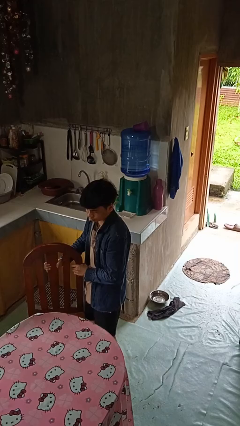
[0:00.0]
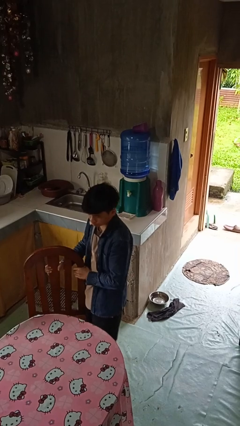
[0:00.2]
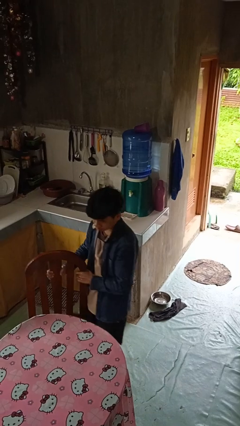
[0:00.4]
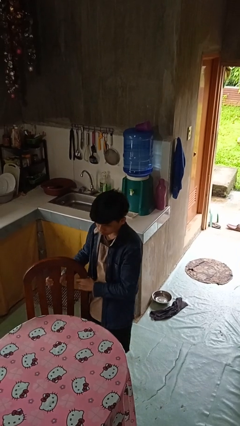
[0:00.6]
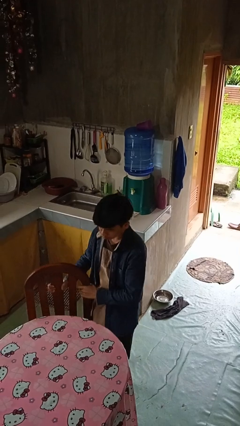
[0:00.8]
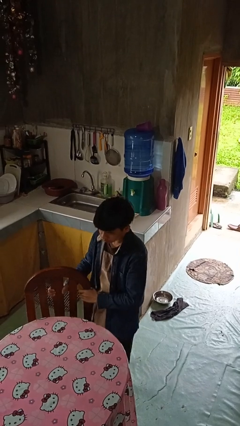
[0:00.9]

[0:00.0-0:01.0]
person pushes in chair

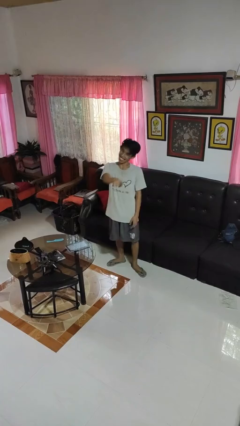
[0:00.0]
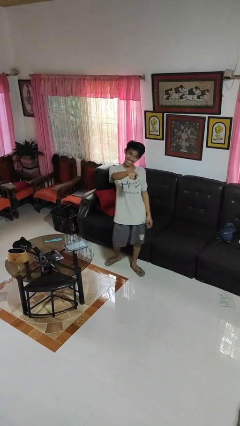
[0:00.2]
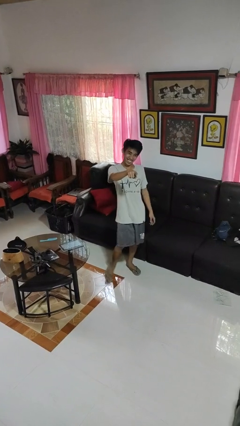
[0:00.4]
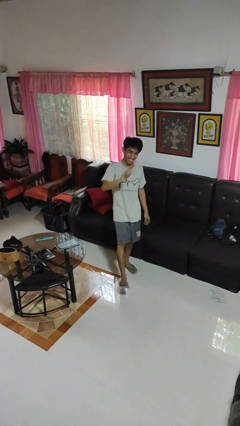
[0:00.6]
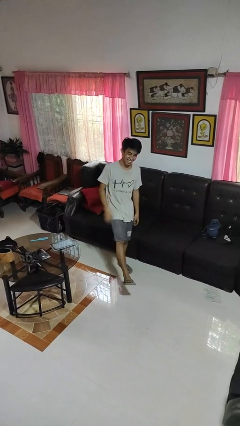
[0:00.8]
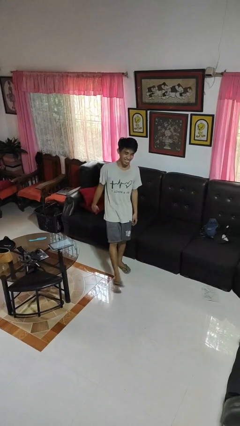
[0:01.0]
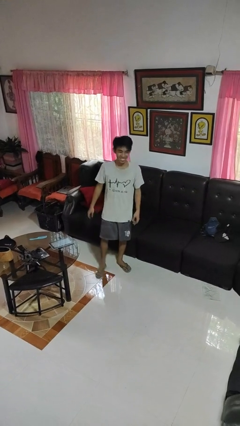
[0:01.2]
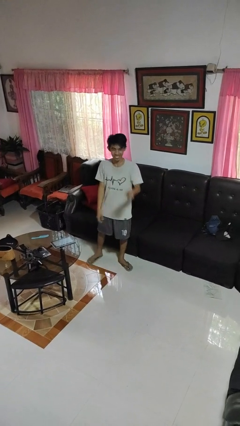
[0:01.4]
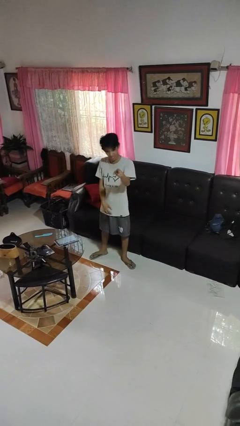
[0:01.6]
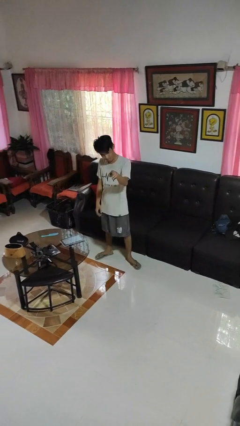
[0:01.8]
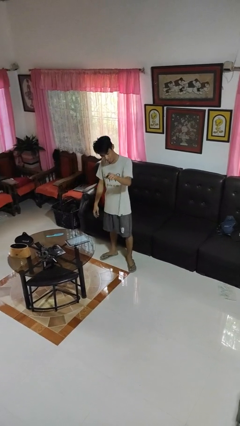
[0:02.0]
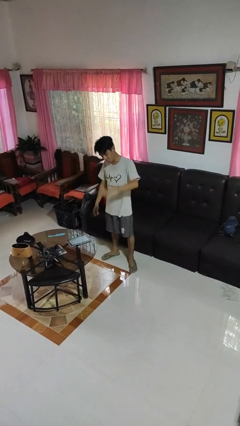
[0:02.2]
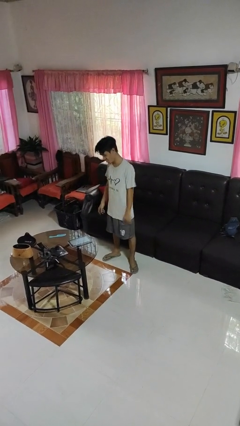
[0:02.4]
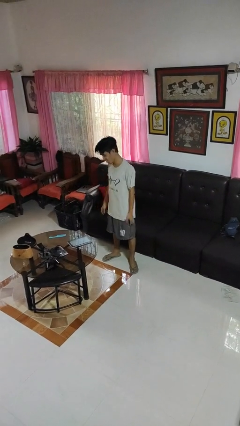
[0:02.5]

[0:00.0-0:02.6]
person points at person

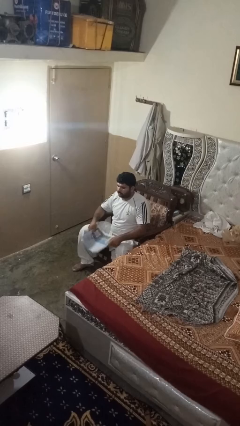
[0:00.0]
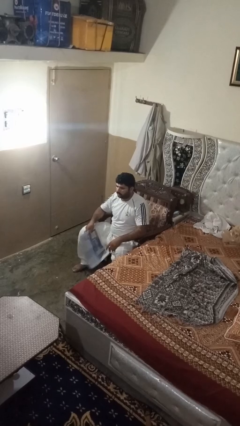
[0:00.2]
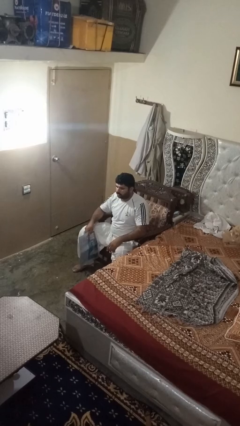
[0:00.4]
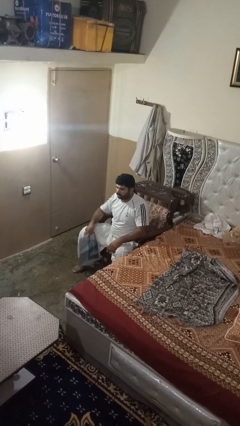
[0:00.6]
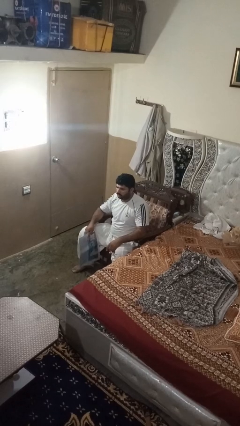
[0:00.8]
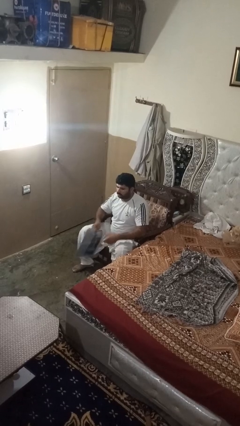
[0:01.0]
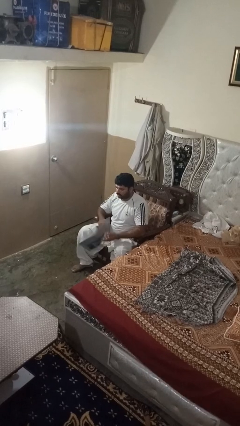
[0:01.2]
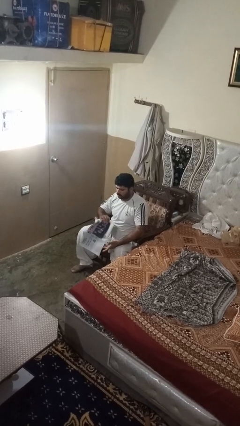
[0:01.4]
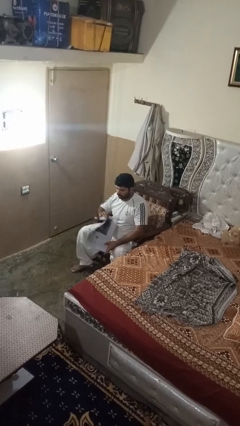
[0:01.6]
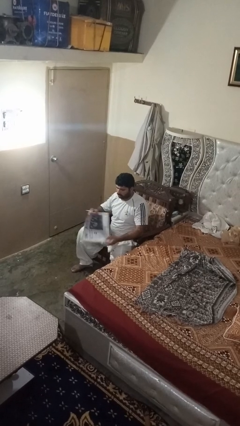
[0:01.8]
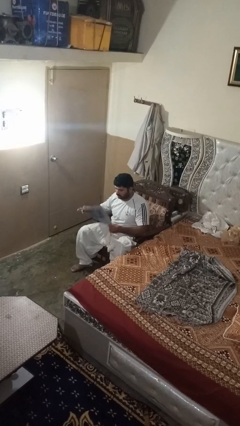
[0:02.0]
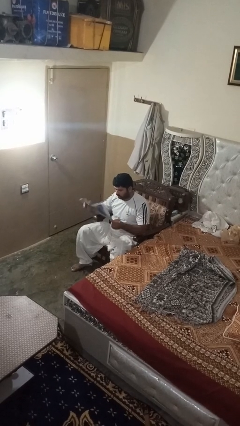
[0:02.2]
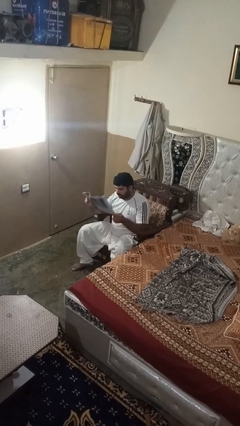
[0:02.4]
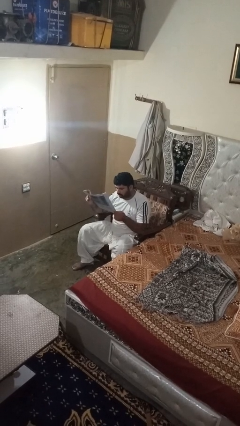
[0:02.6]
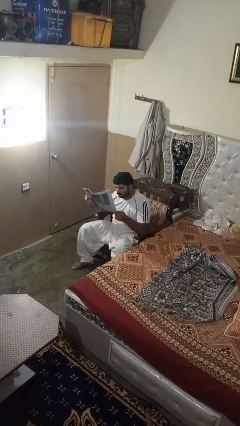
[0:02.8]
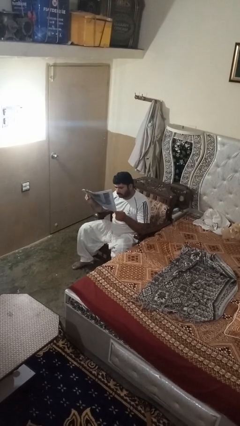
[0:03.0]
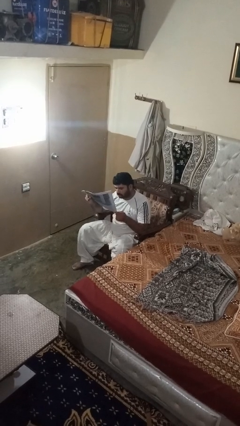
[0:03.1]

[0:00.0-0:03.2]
person reads newspaper

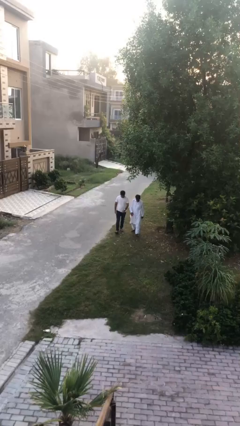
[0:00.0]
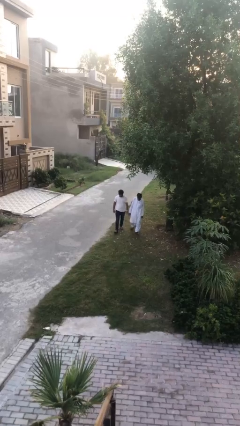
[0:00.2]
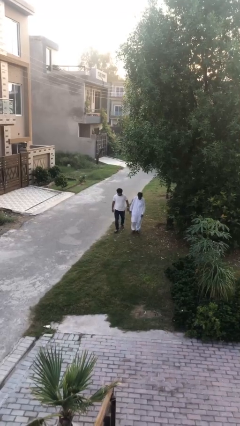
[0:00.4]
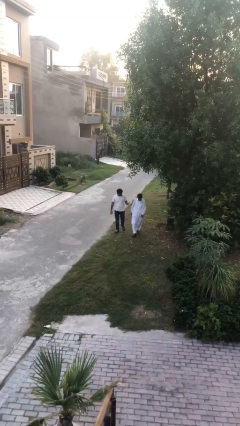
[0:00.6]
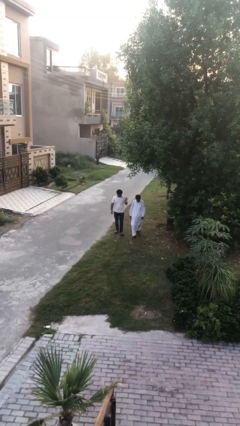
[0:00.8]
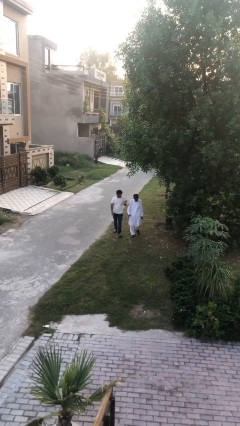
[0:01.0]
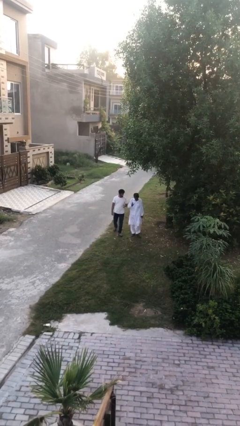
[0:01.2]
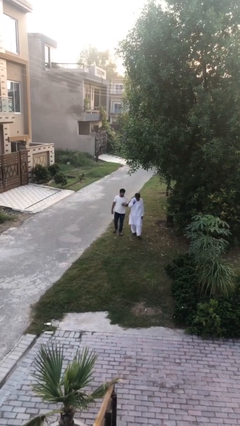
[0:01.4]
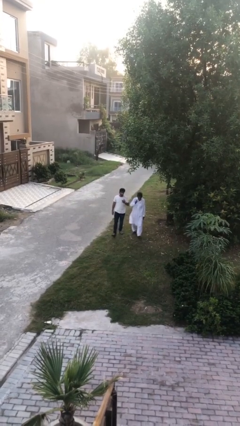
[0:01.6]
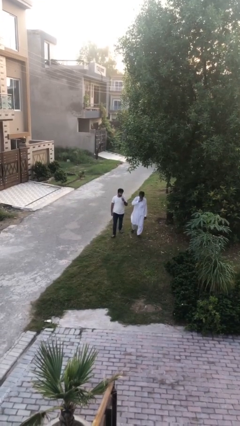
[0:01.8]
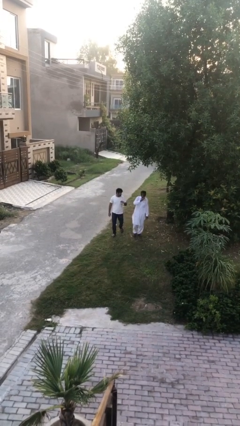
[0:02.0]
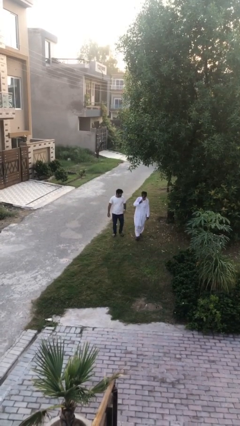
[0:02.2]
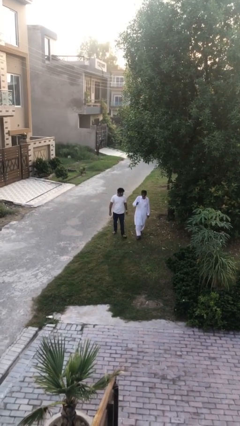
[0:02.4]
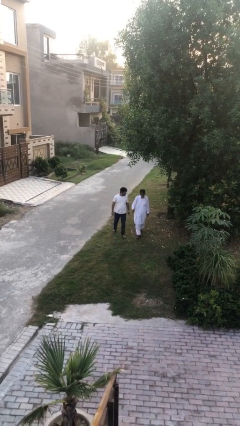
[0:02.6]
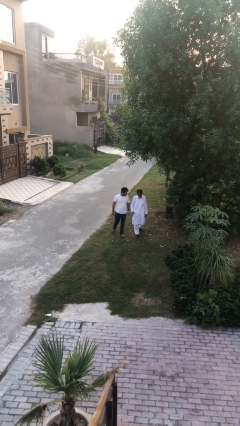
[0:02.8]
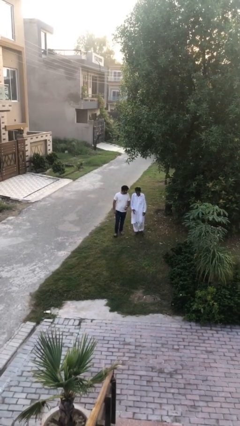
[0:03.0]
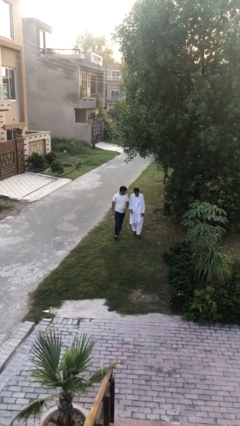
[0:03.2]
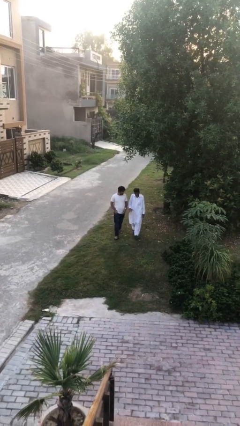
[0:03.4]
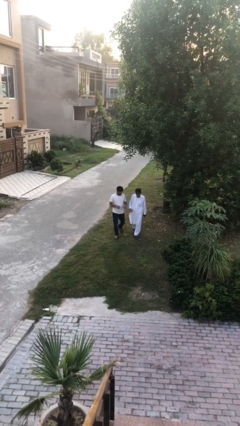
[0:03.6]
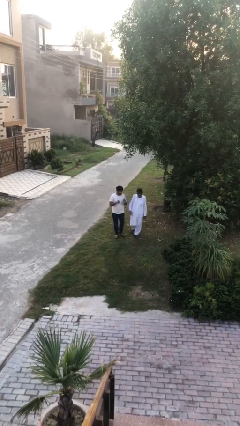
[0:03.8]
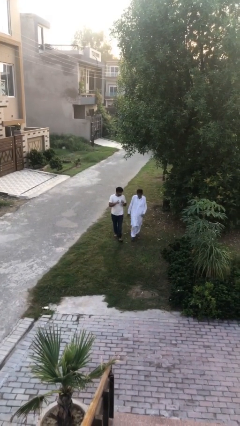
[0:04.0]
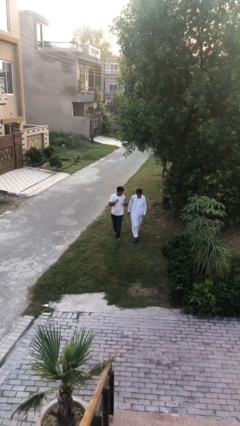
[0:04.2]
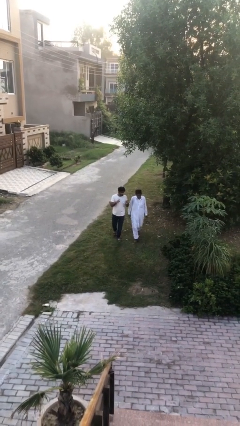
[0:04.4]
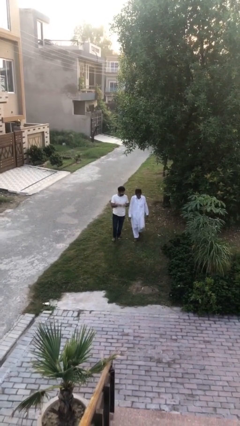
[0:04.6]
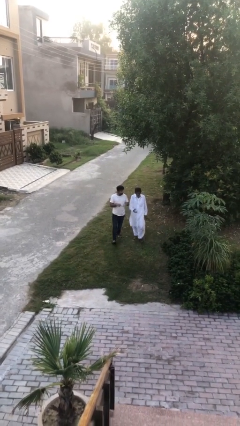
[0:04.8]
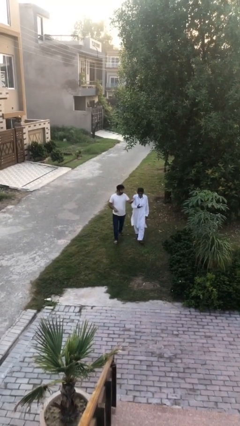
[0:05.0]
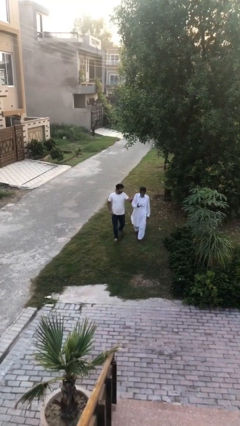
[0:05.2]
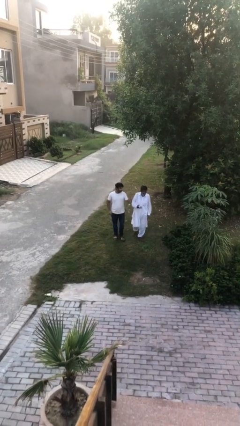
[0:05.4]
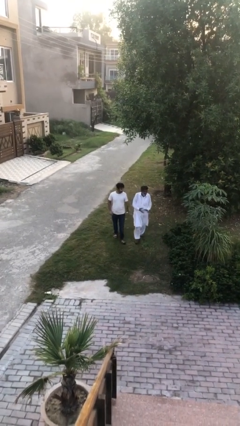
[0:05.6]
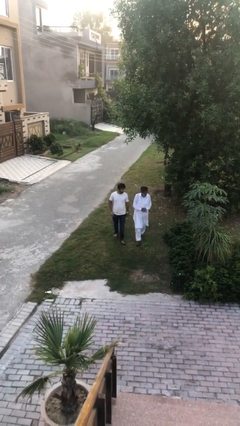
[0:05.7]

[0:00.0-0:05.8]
person talks to person

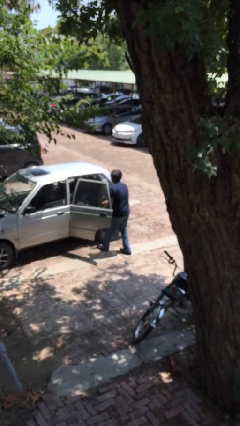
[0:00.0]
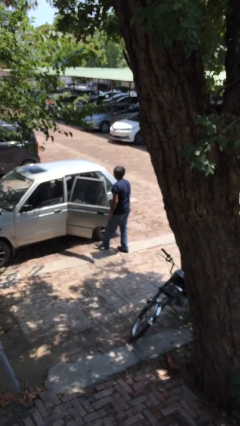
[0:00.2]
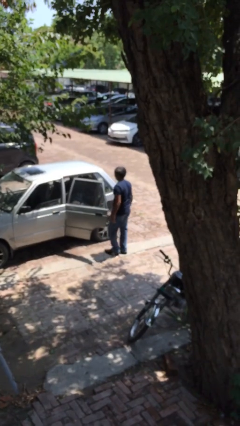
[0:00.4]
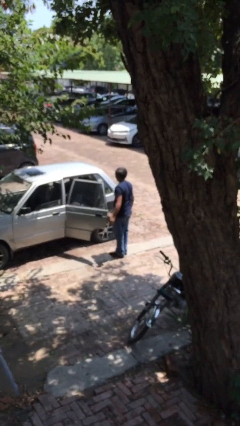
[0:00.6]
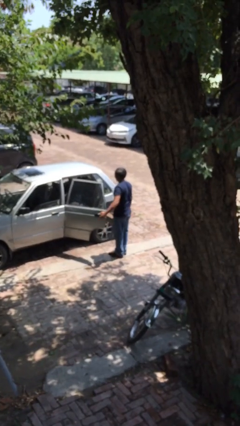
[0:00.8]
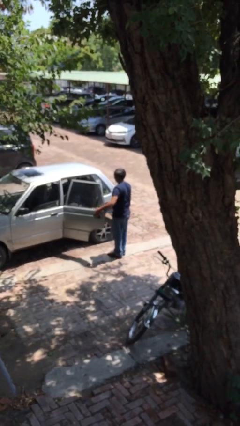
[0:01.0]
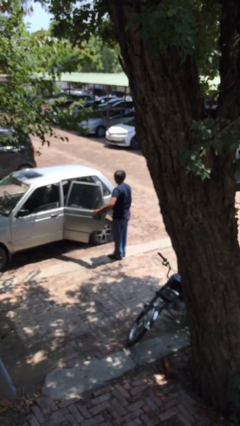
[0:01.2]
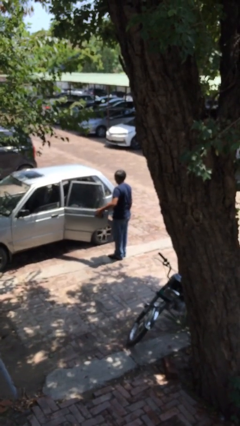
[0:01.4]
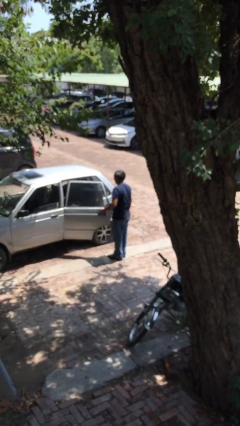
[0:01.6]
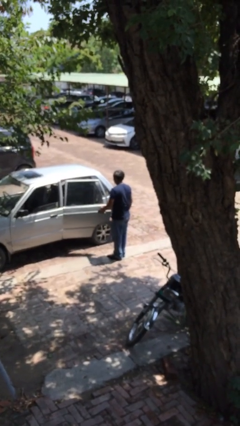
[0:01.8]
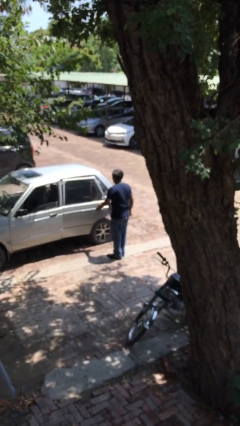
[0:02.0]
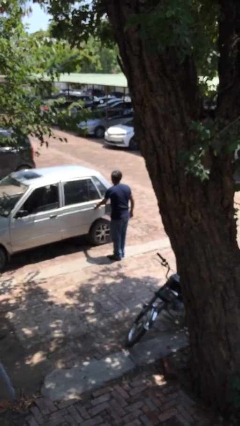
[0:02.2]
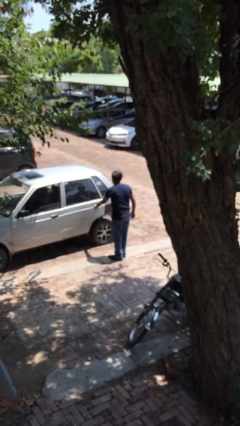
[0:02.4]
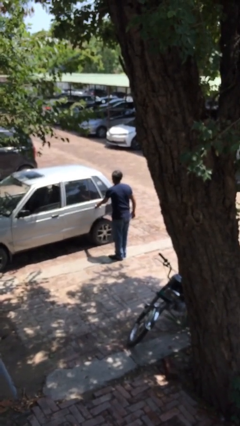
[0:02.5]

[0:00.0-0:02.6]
person closes car door

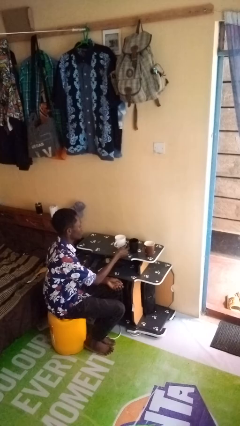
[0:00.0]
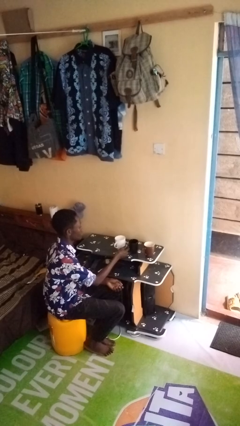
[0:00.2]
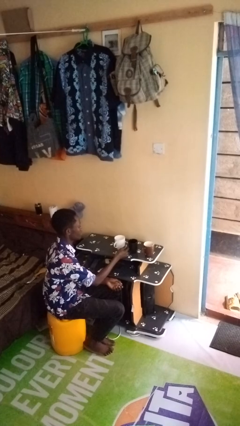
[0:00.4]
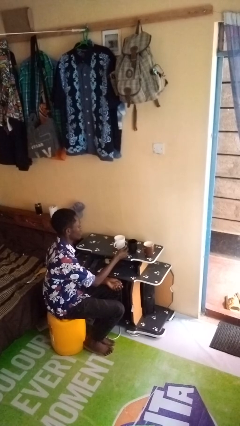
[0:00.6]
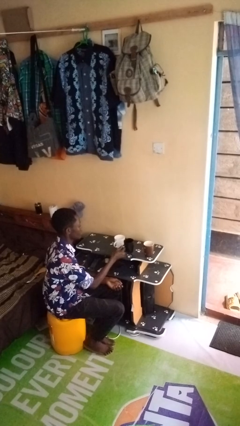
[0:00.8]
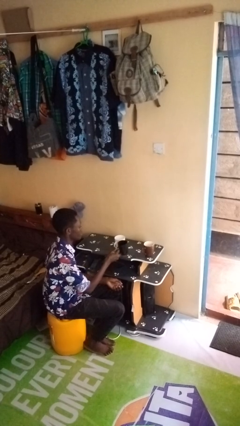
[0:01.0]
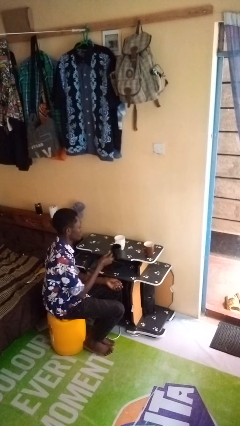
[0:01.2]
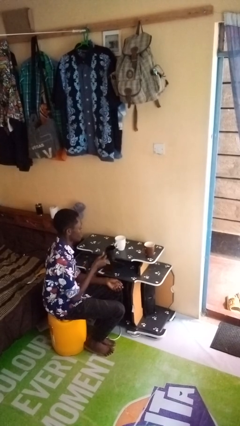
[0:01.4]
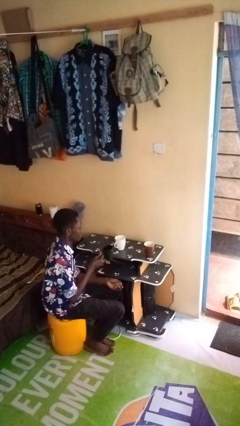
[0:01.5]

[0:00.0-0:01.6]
person picks up object from table

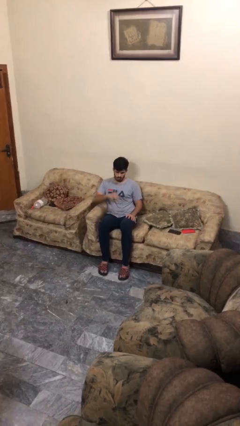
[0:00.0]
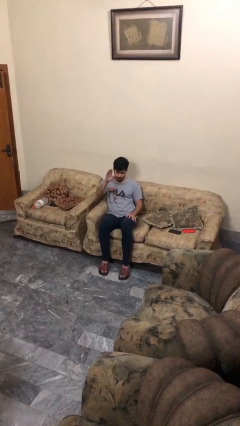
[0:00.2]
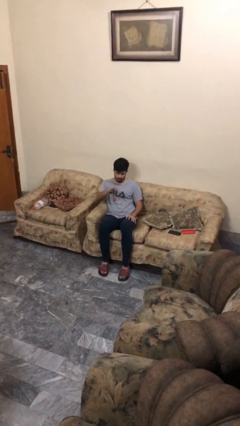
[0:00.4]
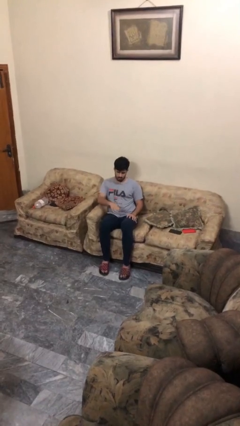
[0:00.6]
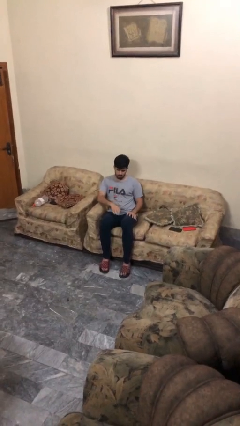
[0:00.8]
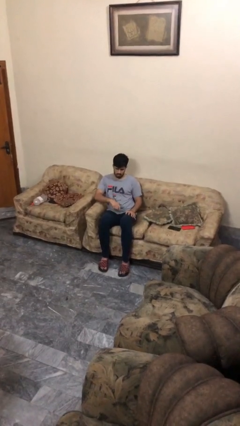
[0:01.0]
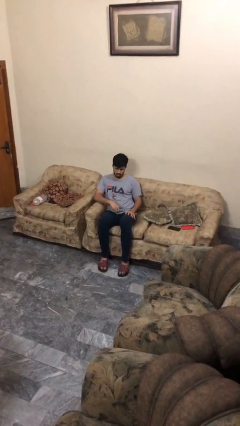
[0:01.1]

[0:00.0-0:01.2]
person gestures swipe down
